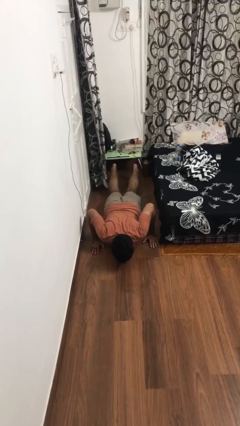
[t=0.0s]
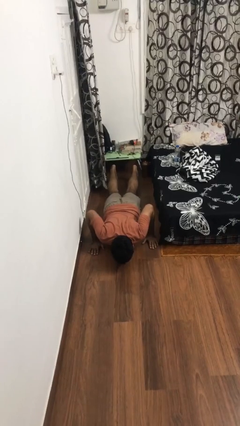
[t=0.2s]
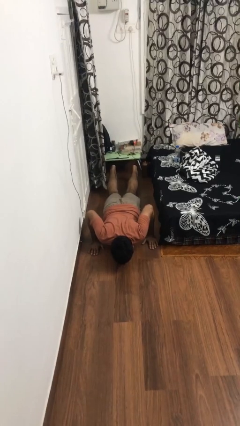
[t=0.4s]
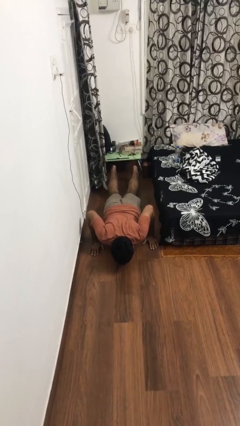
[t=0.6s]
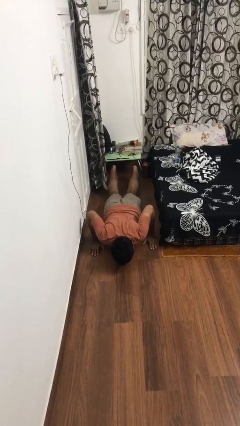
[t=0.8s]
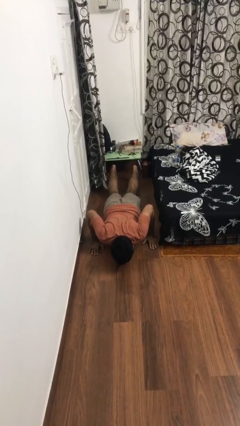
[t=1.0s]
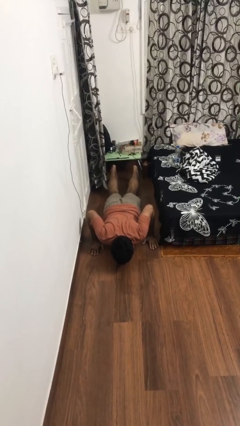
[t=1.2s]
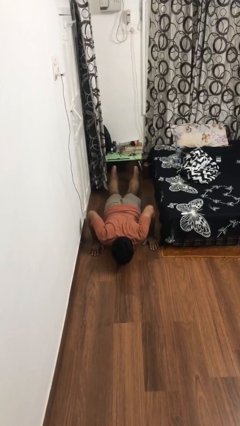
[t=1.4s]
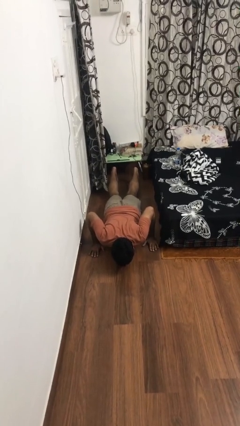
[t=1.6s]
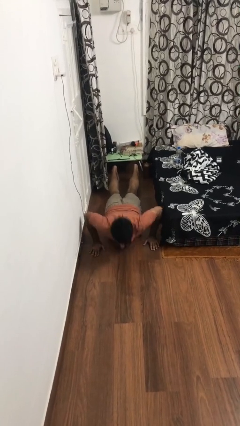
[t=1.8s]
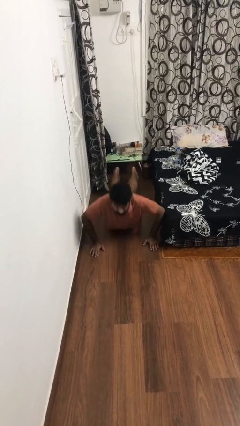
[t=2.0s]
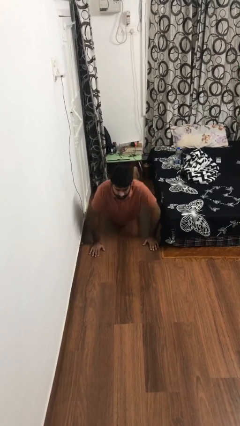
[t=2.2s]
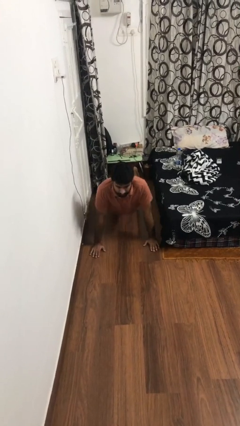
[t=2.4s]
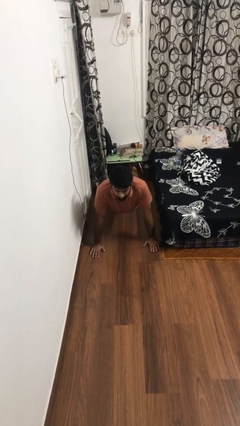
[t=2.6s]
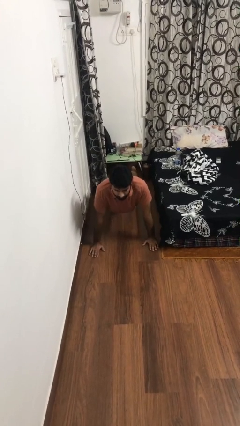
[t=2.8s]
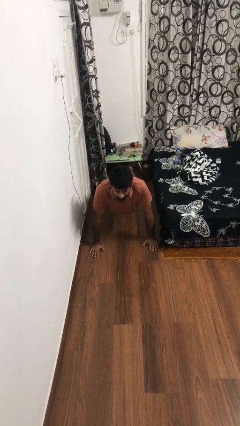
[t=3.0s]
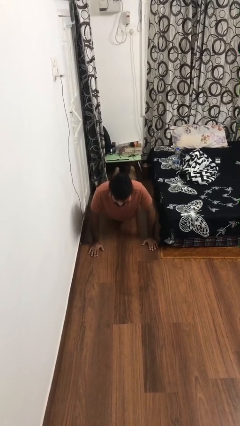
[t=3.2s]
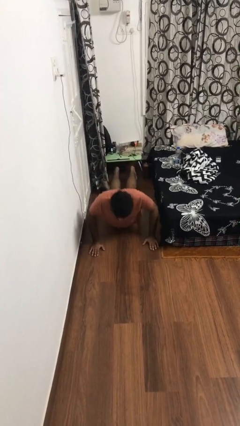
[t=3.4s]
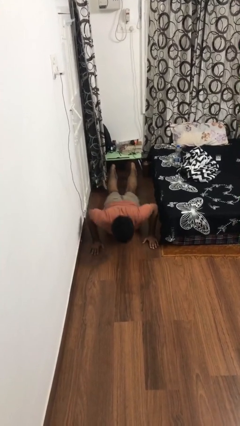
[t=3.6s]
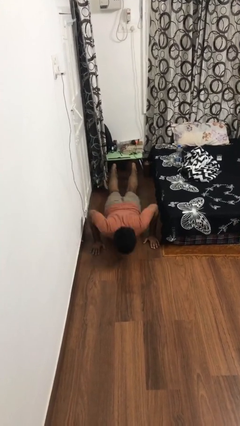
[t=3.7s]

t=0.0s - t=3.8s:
person exercises with pushup

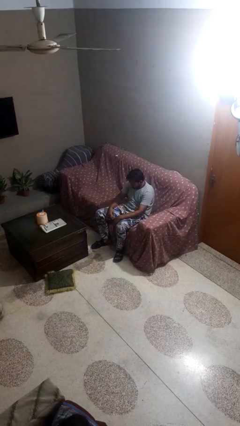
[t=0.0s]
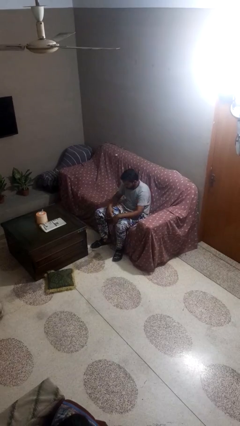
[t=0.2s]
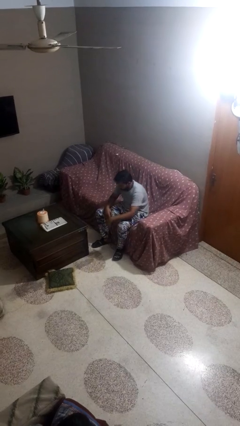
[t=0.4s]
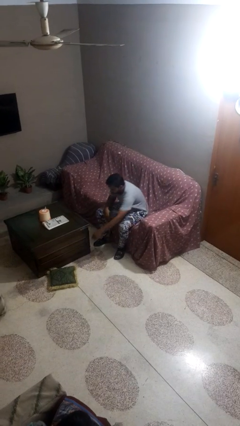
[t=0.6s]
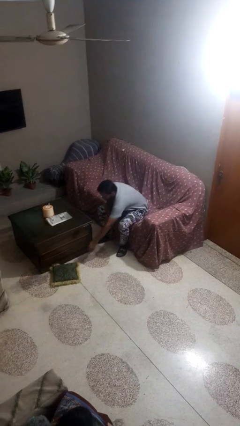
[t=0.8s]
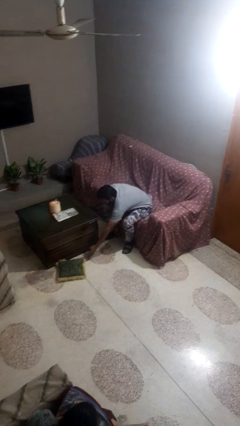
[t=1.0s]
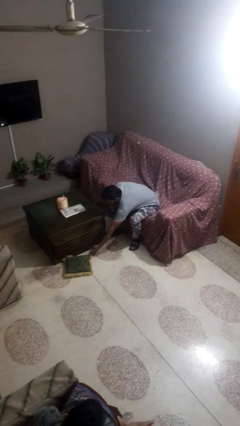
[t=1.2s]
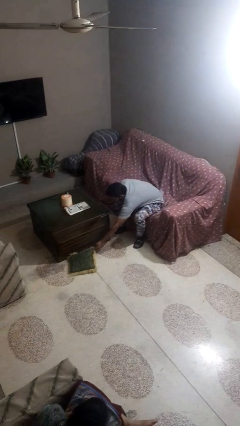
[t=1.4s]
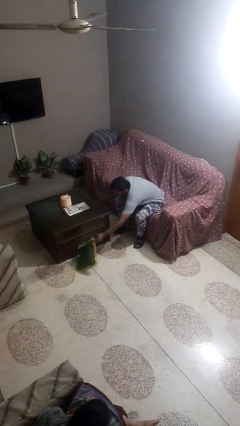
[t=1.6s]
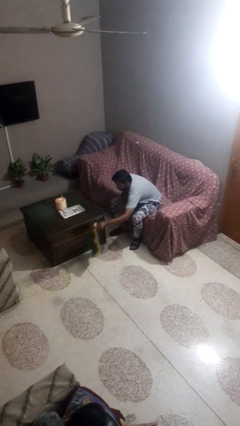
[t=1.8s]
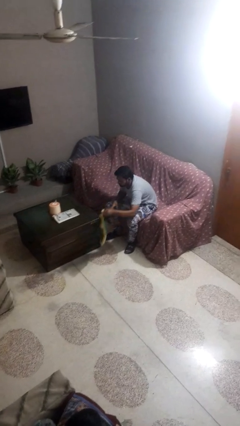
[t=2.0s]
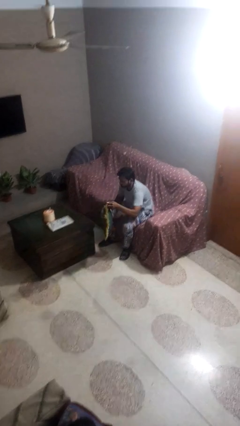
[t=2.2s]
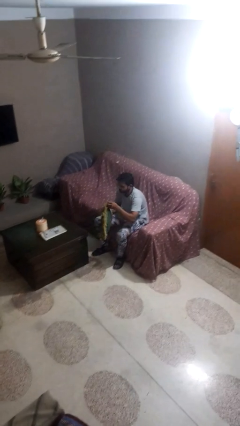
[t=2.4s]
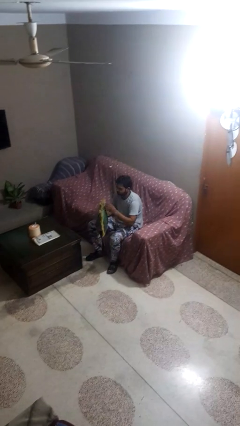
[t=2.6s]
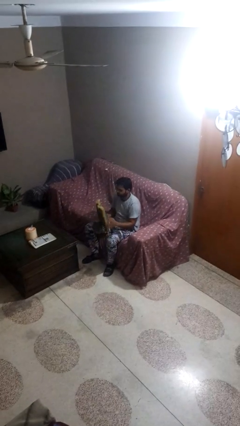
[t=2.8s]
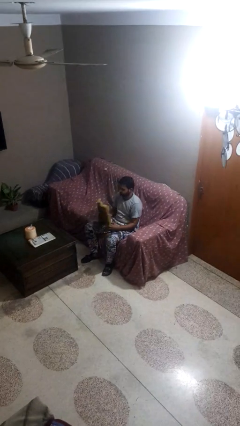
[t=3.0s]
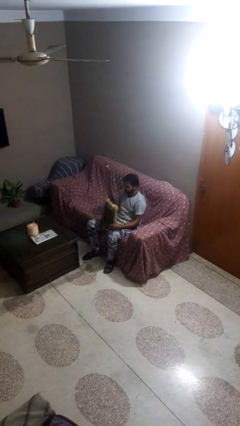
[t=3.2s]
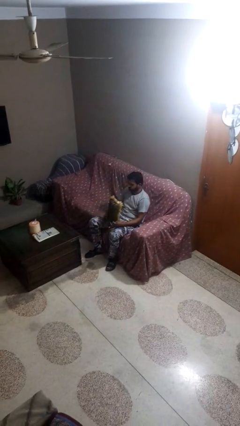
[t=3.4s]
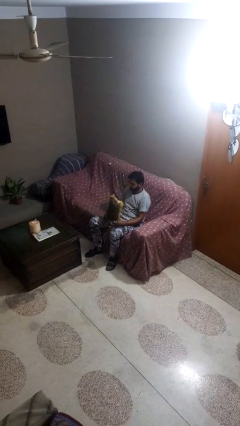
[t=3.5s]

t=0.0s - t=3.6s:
person picks up object from floor

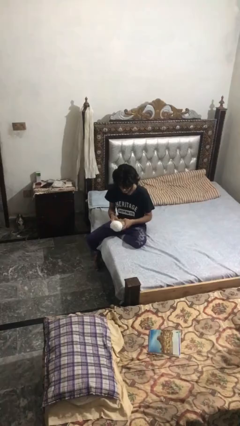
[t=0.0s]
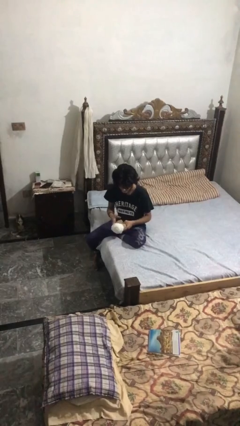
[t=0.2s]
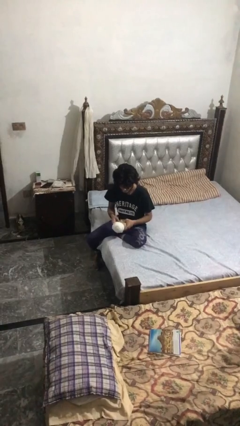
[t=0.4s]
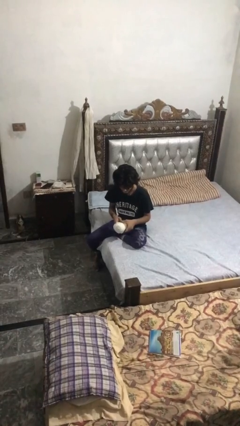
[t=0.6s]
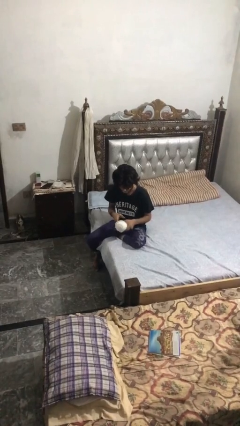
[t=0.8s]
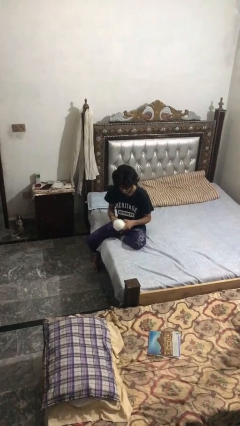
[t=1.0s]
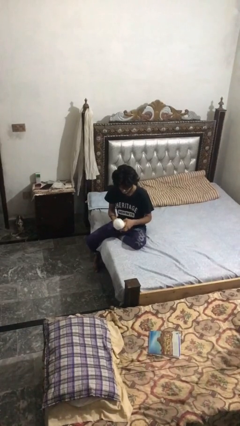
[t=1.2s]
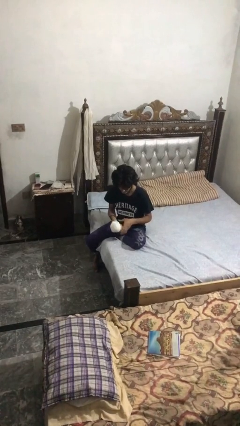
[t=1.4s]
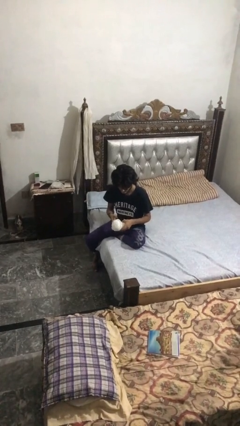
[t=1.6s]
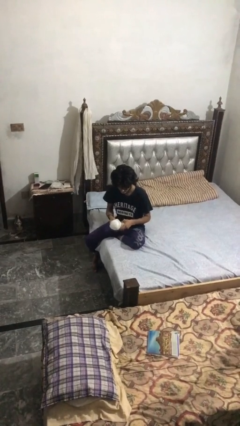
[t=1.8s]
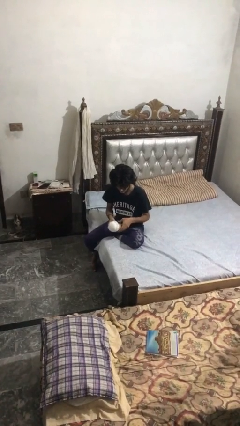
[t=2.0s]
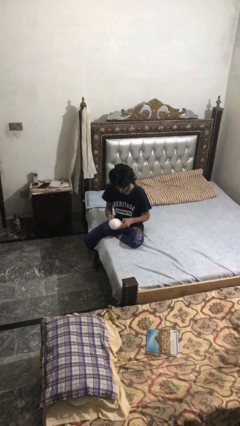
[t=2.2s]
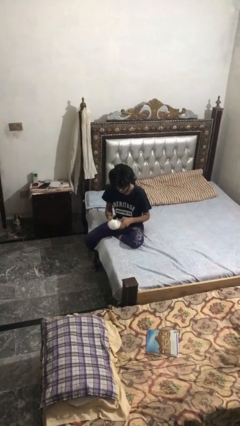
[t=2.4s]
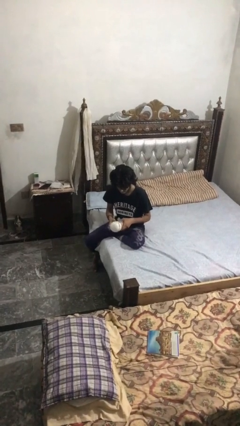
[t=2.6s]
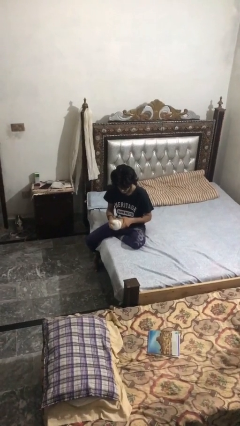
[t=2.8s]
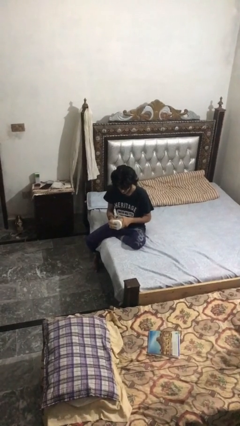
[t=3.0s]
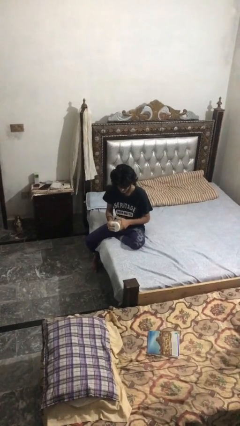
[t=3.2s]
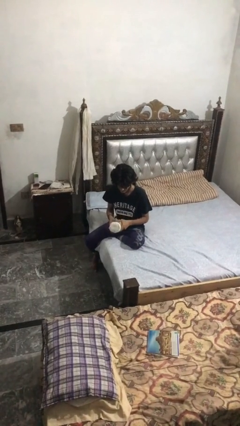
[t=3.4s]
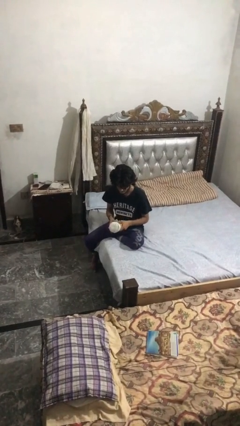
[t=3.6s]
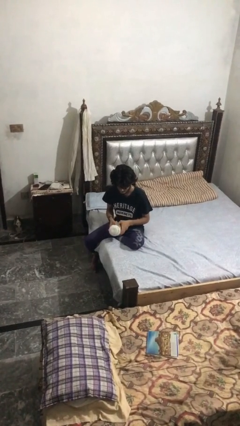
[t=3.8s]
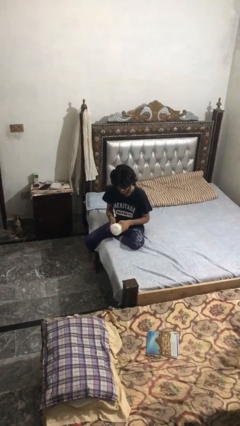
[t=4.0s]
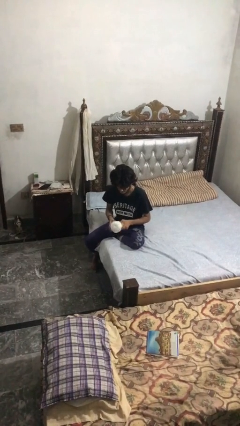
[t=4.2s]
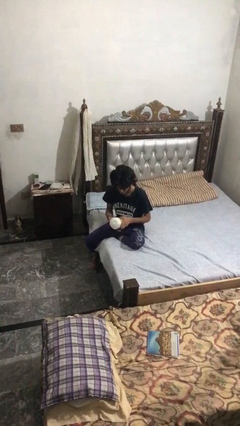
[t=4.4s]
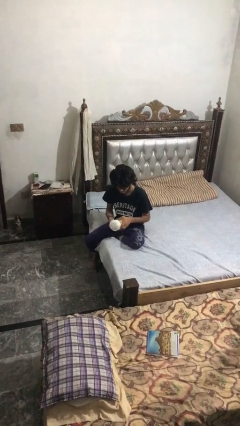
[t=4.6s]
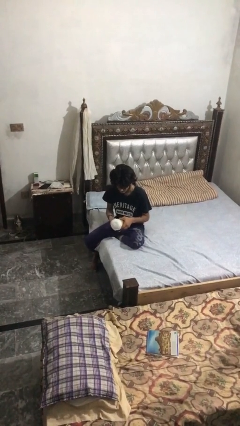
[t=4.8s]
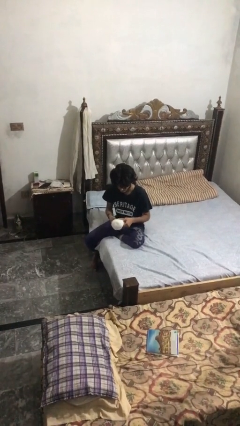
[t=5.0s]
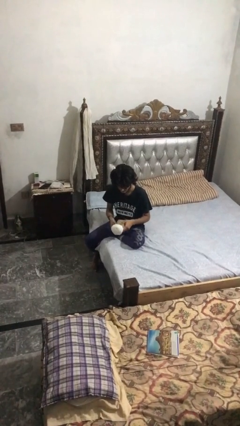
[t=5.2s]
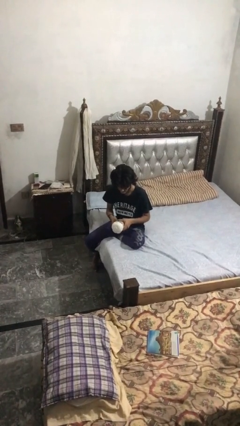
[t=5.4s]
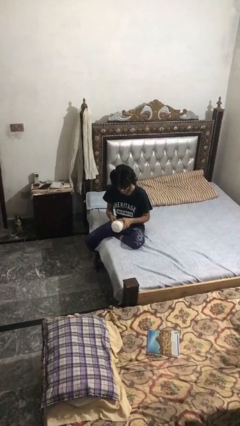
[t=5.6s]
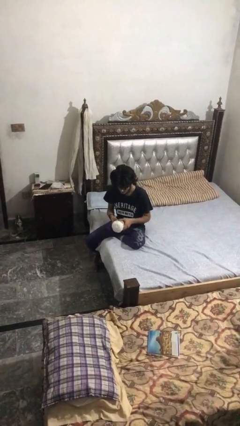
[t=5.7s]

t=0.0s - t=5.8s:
person squeezes object

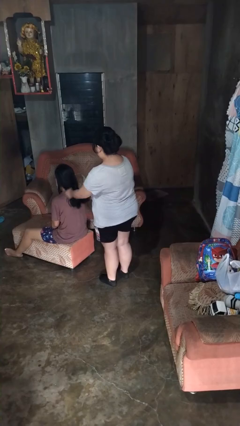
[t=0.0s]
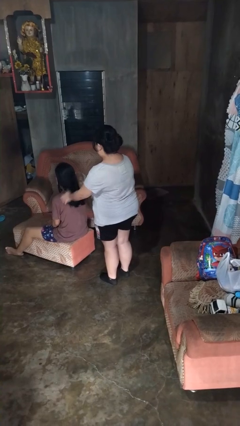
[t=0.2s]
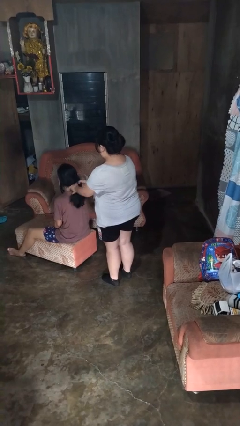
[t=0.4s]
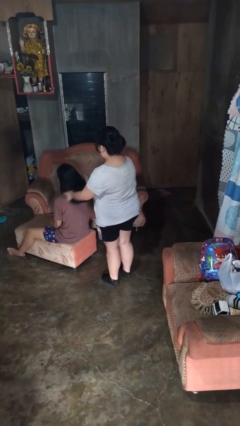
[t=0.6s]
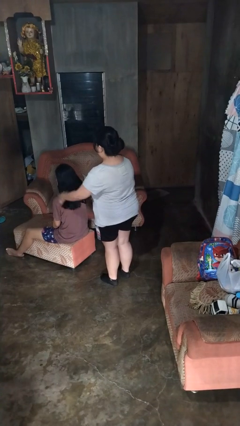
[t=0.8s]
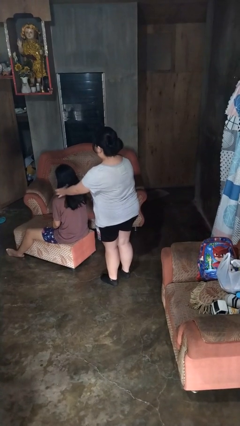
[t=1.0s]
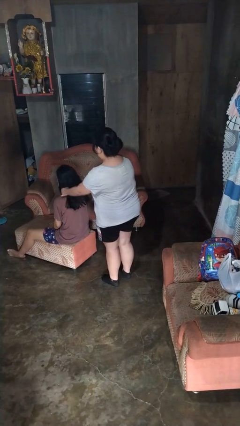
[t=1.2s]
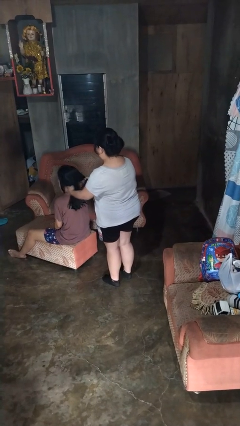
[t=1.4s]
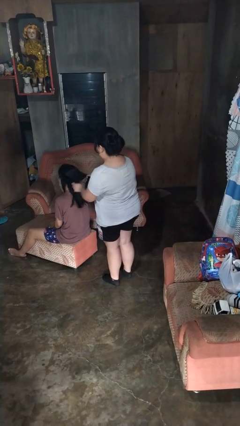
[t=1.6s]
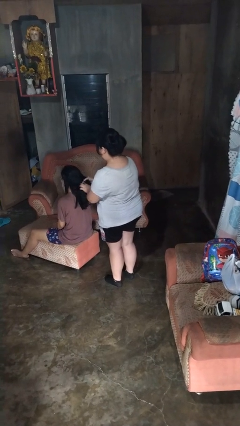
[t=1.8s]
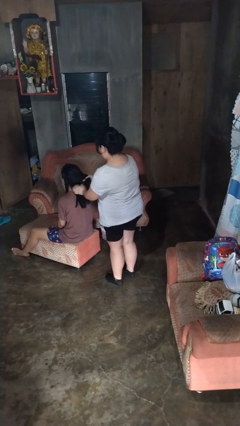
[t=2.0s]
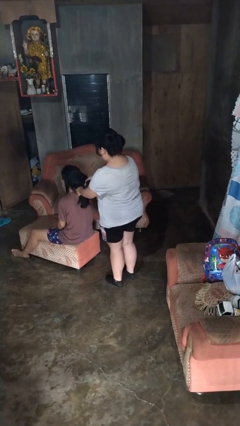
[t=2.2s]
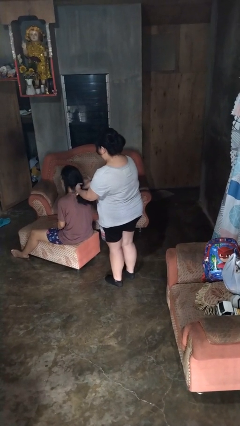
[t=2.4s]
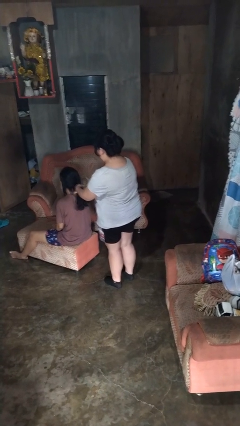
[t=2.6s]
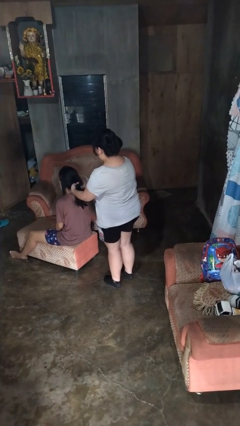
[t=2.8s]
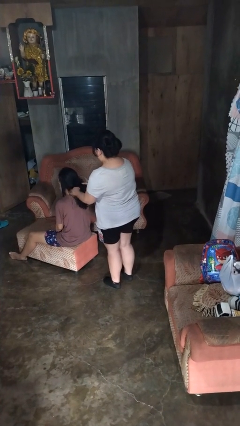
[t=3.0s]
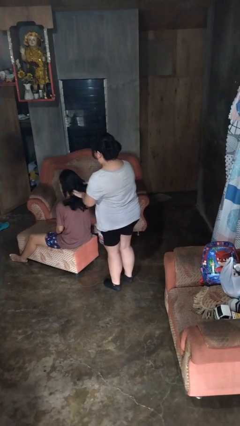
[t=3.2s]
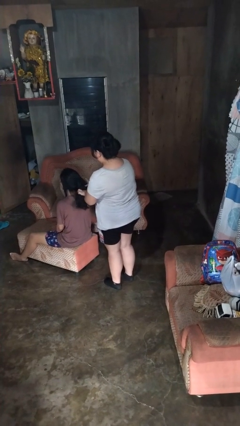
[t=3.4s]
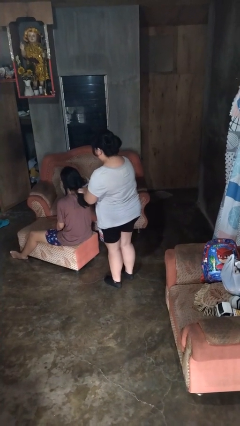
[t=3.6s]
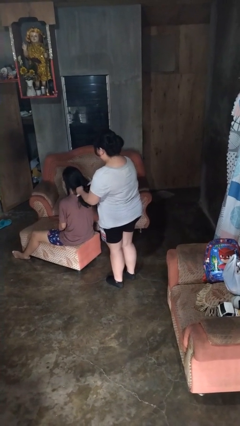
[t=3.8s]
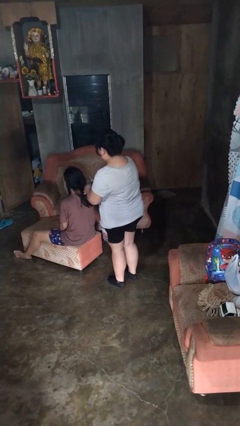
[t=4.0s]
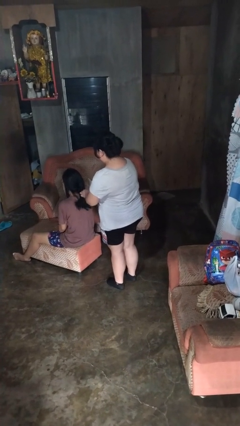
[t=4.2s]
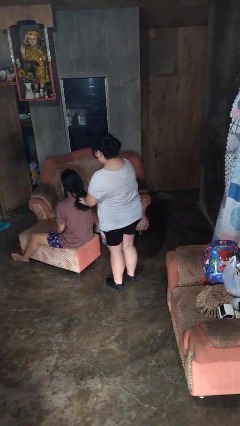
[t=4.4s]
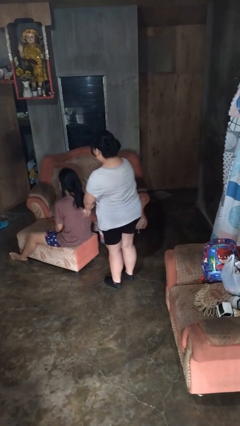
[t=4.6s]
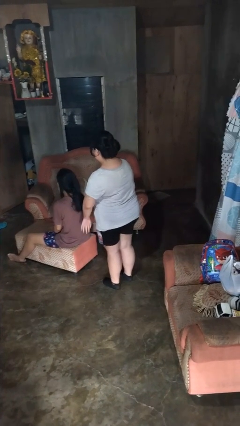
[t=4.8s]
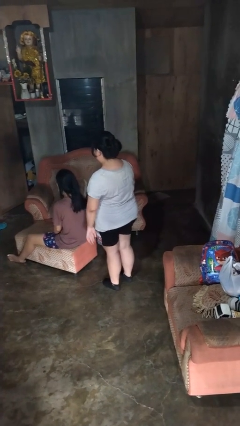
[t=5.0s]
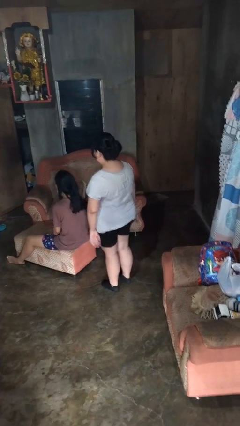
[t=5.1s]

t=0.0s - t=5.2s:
person braids hair of person
